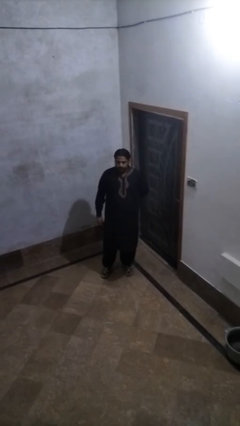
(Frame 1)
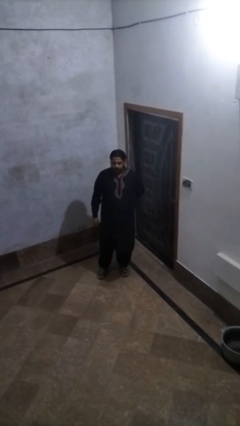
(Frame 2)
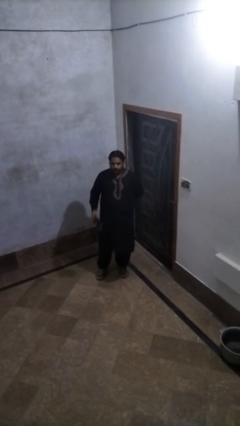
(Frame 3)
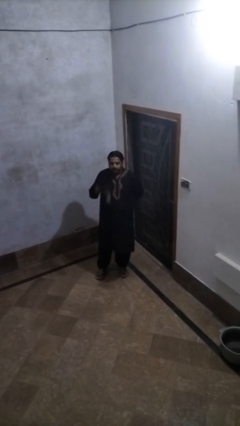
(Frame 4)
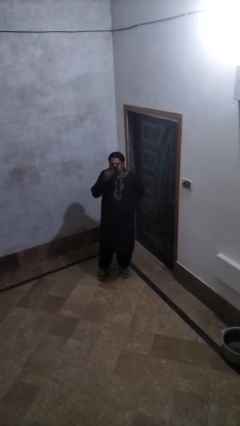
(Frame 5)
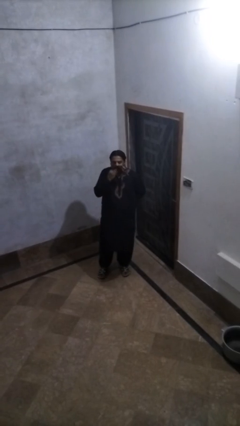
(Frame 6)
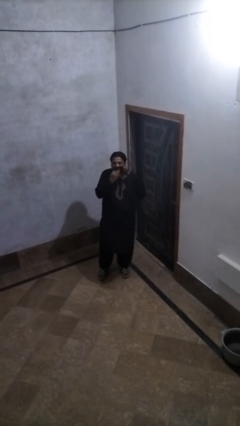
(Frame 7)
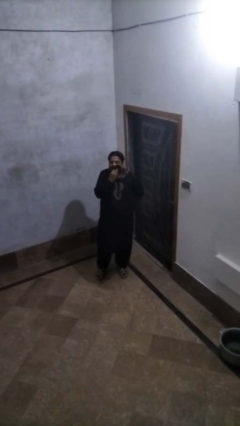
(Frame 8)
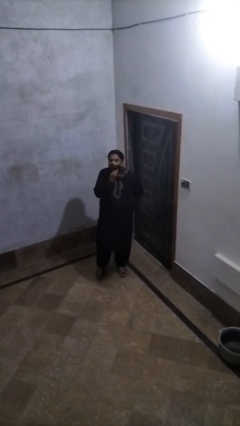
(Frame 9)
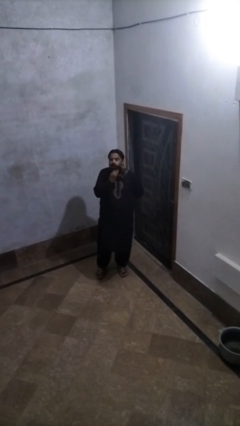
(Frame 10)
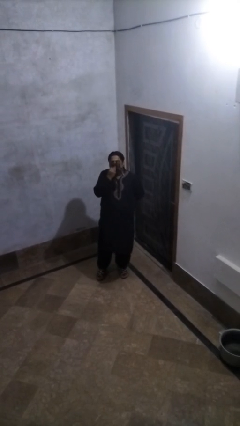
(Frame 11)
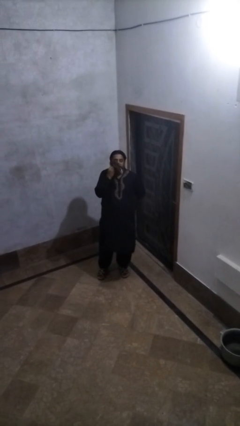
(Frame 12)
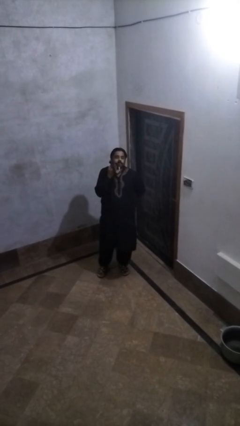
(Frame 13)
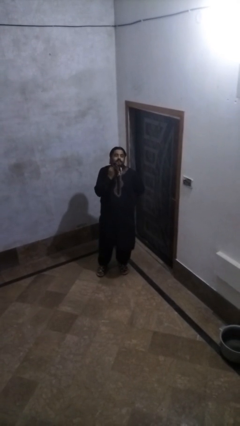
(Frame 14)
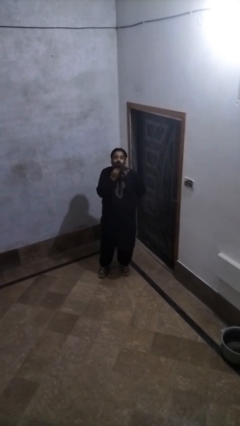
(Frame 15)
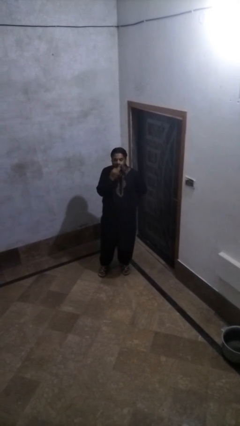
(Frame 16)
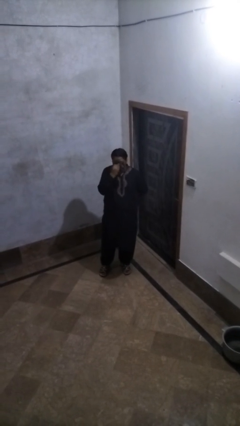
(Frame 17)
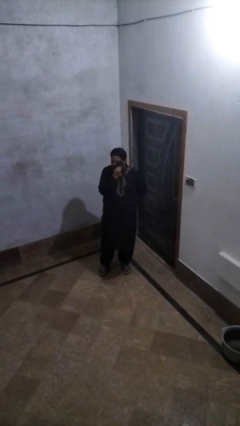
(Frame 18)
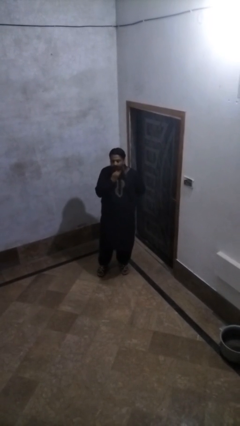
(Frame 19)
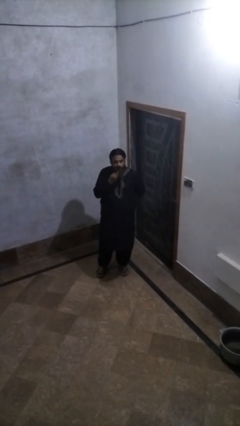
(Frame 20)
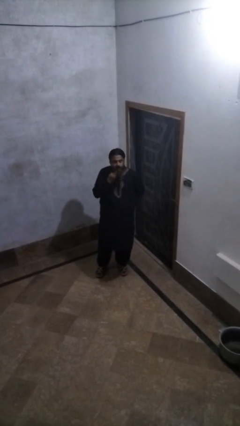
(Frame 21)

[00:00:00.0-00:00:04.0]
person wipes mouth with napkin

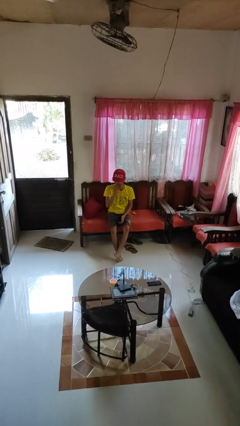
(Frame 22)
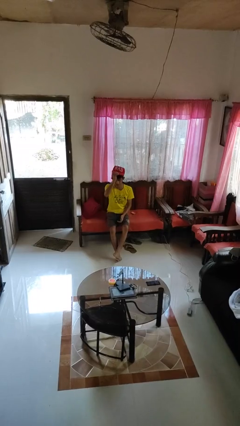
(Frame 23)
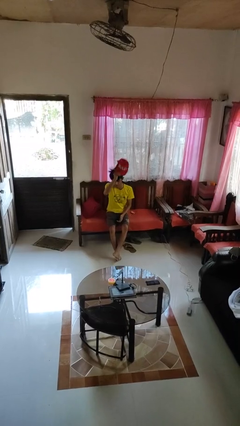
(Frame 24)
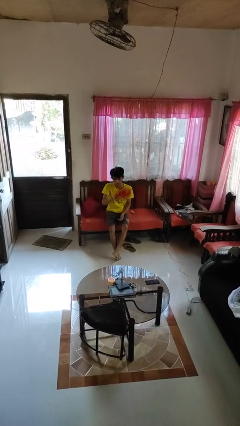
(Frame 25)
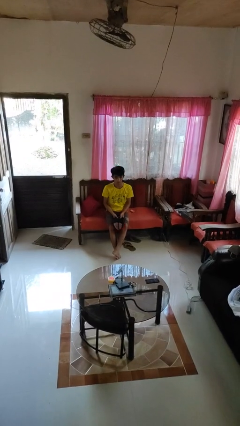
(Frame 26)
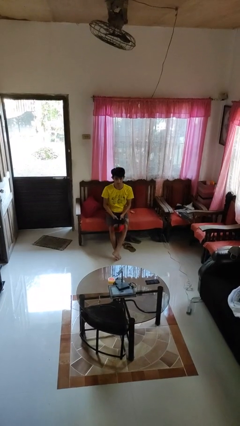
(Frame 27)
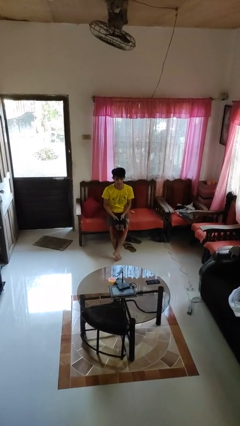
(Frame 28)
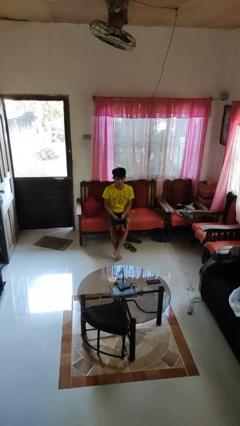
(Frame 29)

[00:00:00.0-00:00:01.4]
person takes off hat

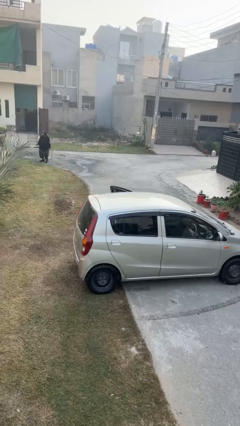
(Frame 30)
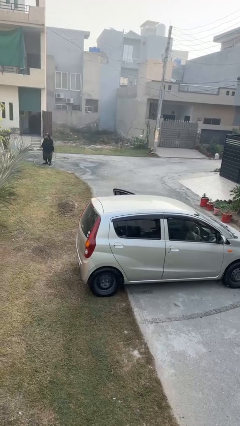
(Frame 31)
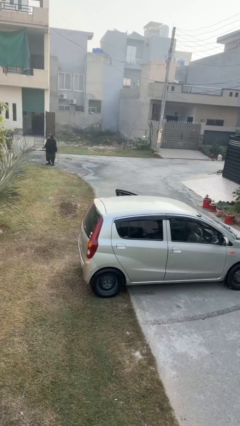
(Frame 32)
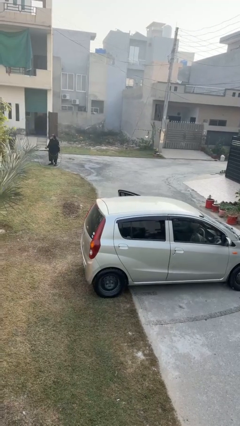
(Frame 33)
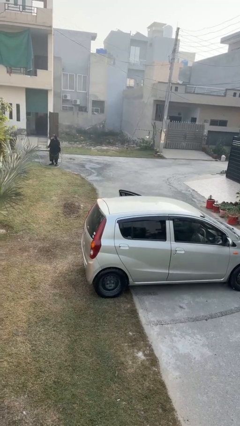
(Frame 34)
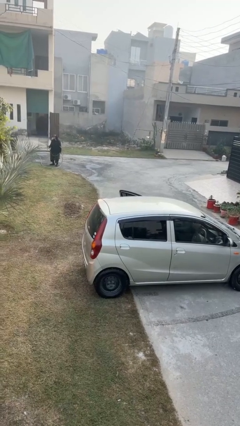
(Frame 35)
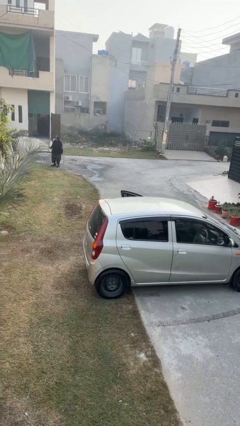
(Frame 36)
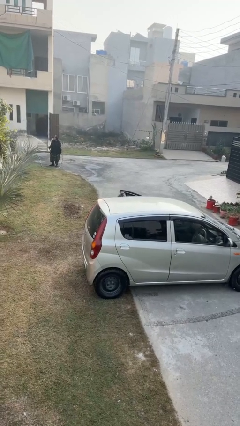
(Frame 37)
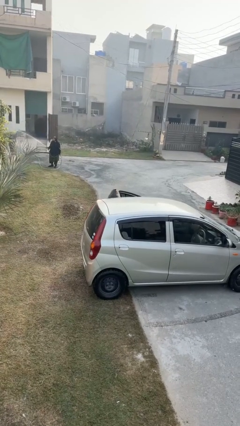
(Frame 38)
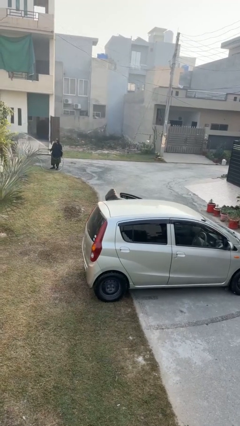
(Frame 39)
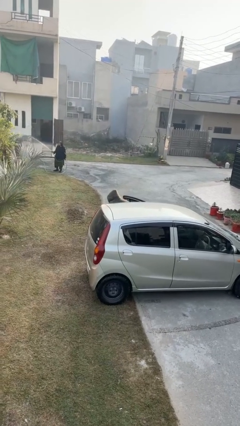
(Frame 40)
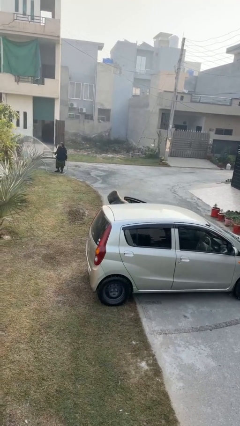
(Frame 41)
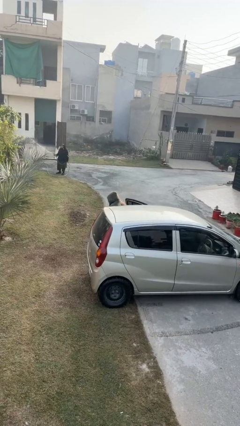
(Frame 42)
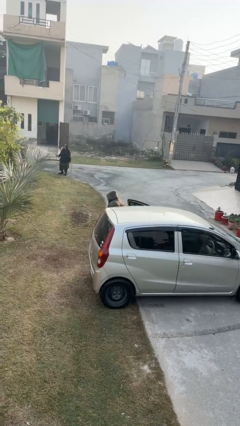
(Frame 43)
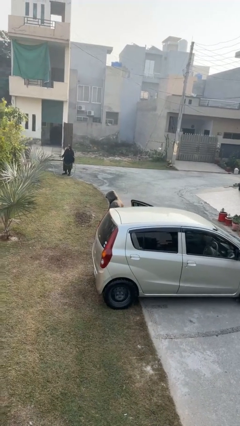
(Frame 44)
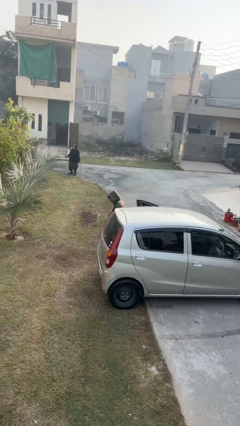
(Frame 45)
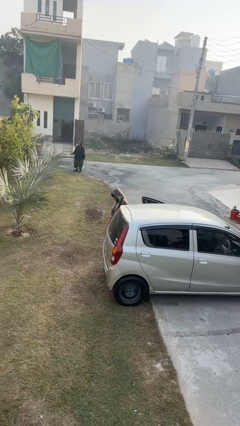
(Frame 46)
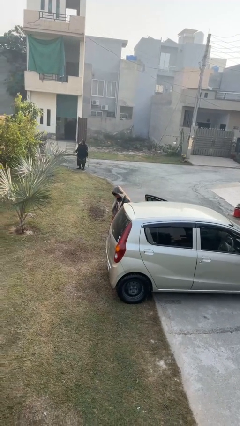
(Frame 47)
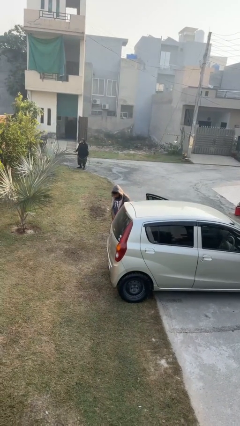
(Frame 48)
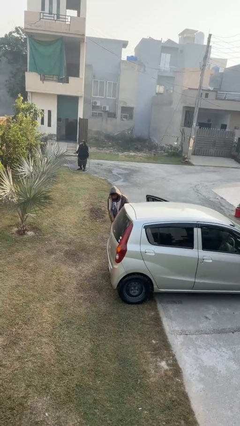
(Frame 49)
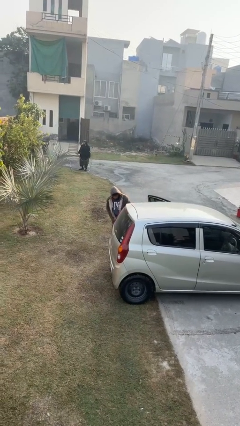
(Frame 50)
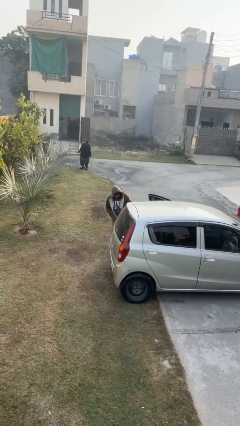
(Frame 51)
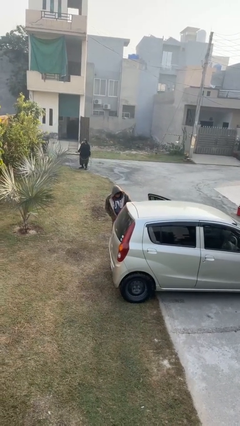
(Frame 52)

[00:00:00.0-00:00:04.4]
person exits car

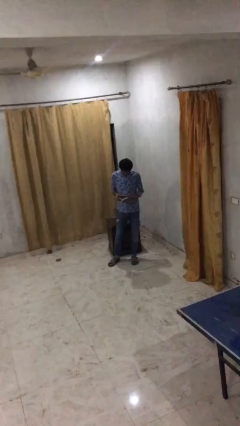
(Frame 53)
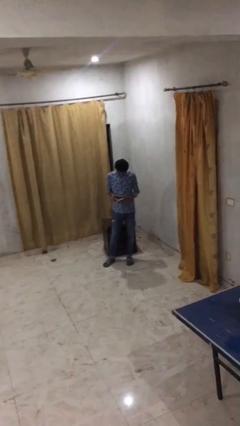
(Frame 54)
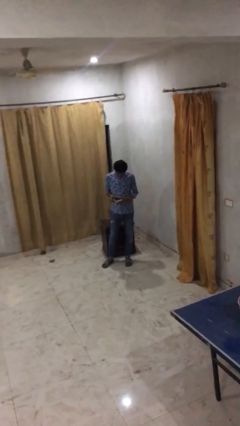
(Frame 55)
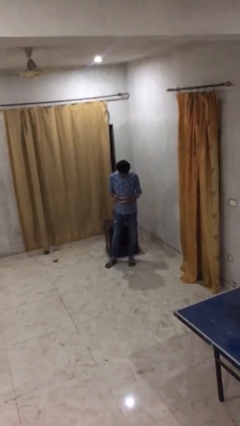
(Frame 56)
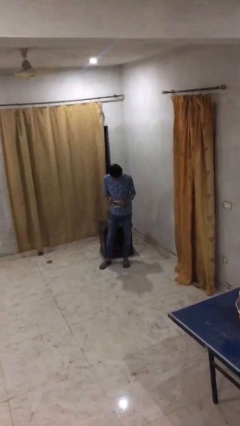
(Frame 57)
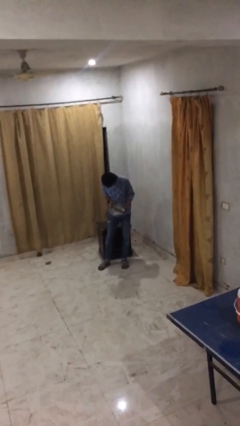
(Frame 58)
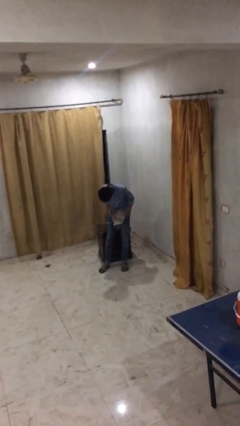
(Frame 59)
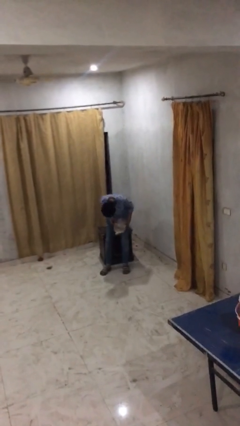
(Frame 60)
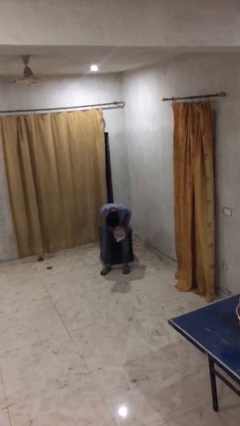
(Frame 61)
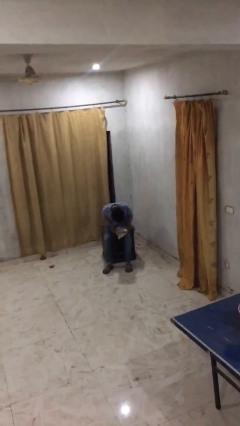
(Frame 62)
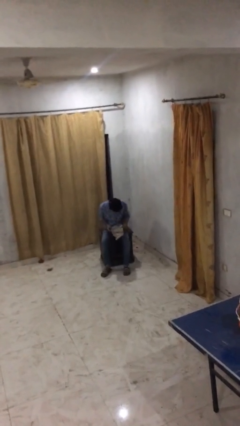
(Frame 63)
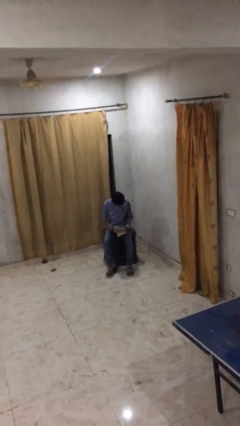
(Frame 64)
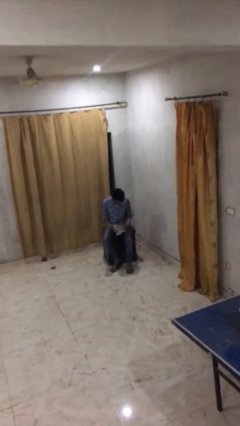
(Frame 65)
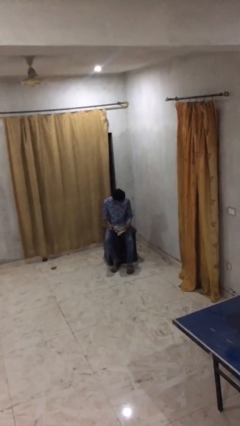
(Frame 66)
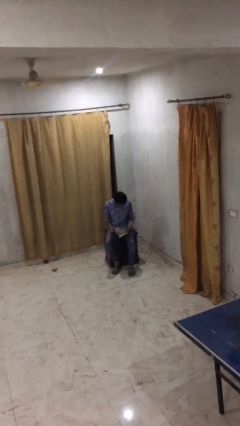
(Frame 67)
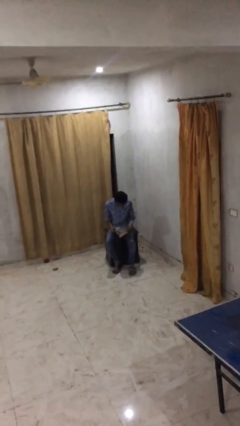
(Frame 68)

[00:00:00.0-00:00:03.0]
person sits down

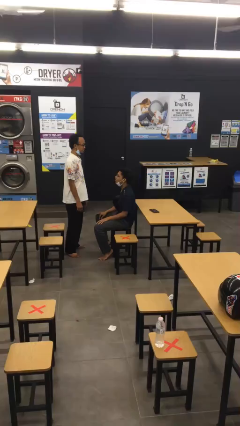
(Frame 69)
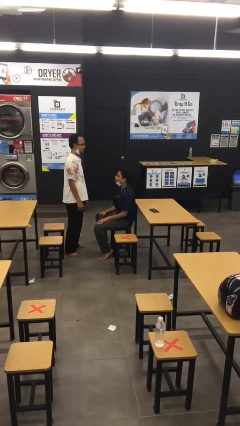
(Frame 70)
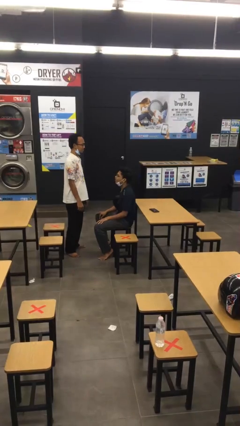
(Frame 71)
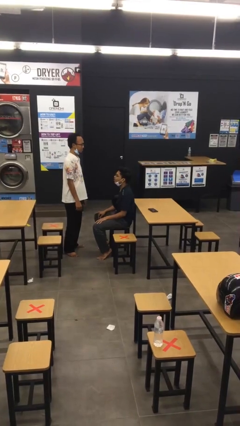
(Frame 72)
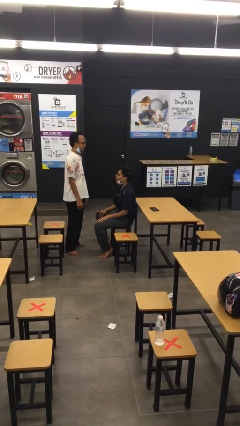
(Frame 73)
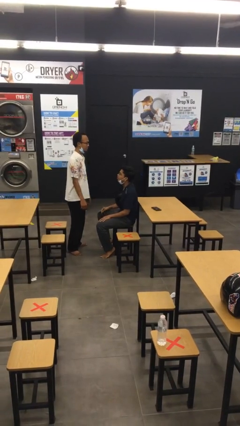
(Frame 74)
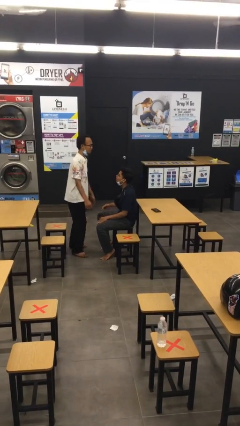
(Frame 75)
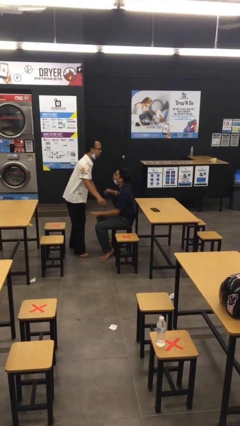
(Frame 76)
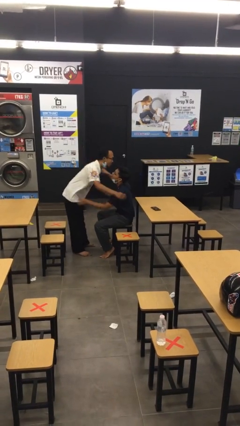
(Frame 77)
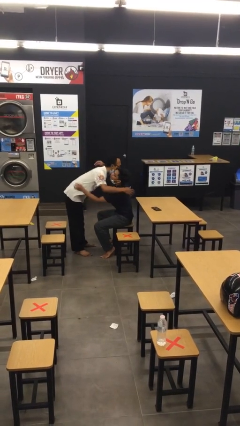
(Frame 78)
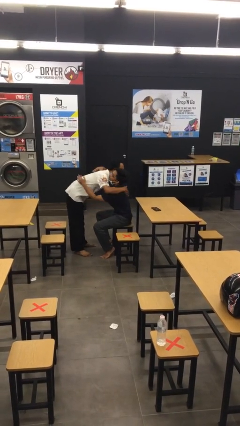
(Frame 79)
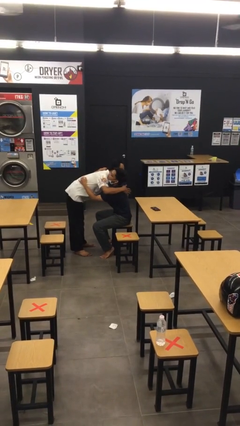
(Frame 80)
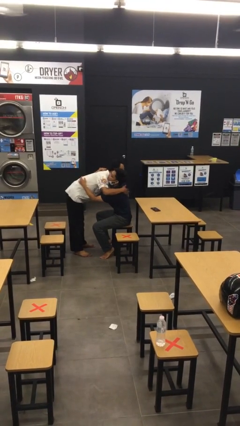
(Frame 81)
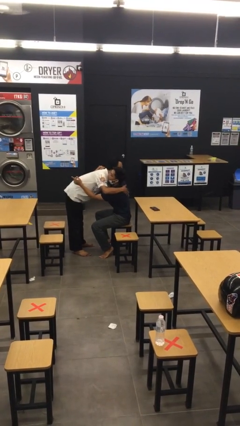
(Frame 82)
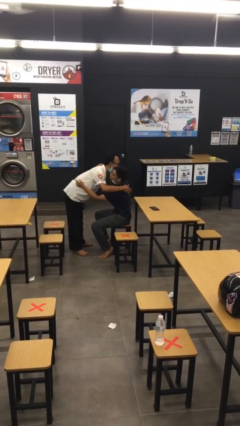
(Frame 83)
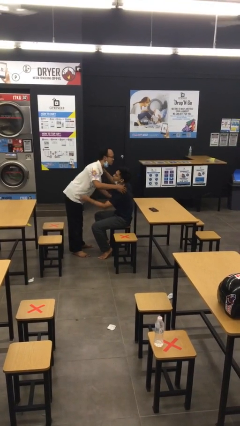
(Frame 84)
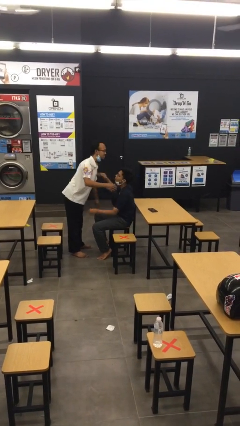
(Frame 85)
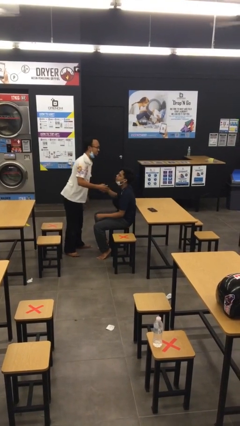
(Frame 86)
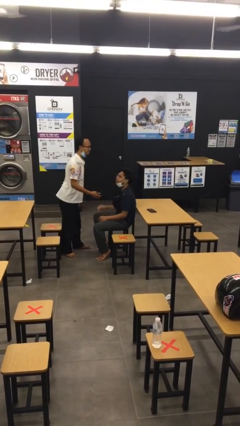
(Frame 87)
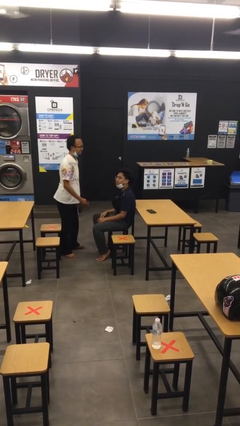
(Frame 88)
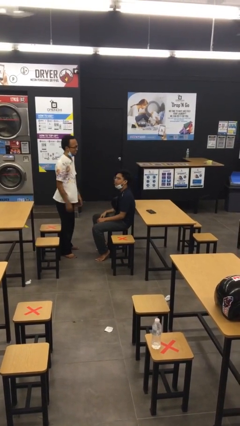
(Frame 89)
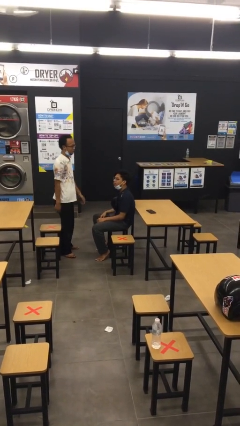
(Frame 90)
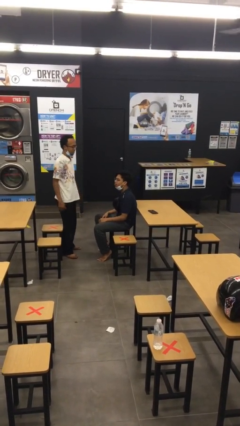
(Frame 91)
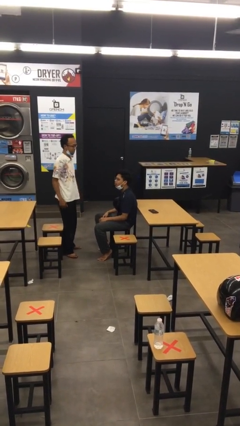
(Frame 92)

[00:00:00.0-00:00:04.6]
person embraces person

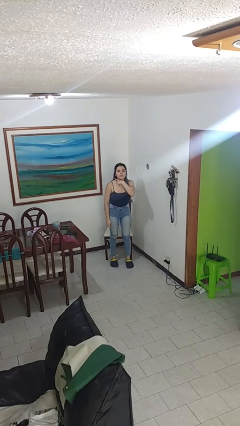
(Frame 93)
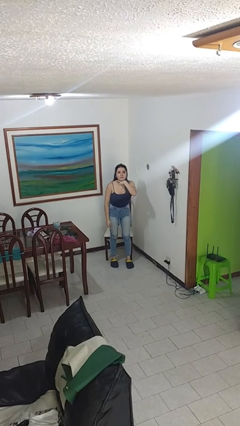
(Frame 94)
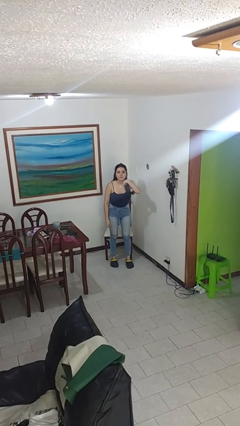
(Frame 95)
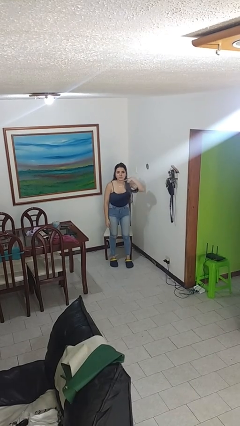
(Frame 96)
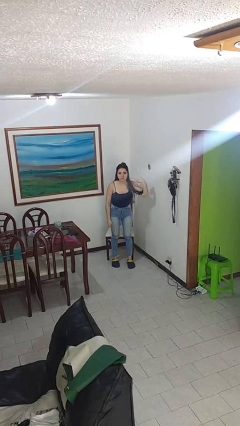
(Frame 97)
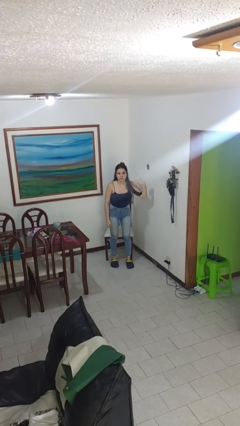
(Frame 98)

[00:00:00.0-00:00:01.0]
person gestures cut
